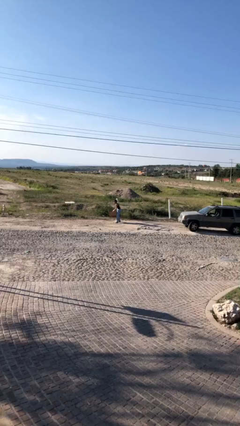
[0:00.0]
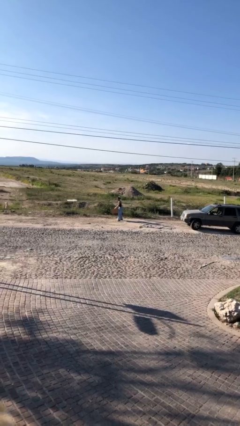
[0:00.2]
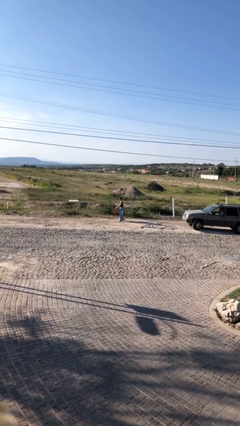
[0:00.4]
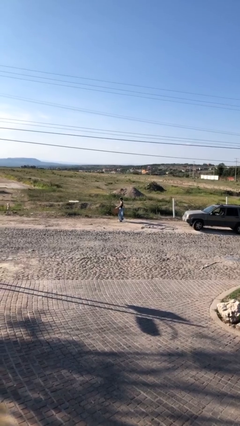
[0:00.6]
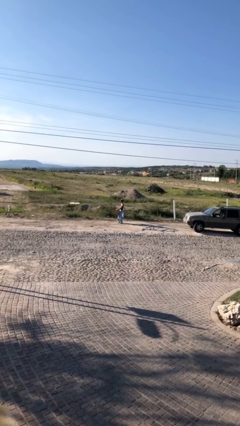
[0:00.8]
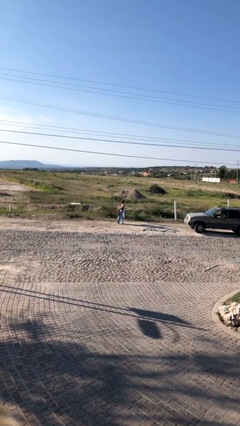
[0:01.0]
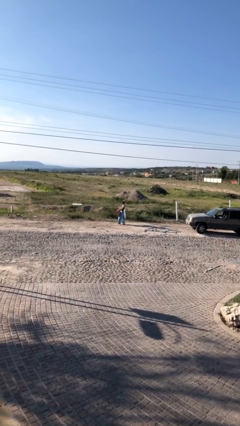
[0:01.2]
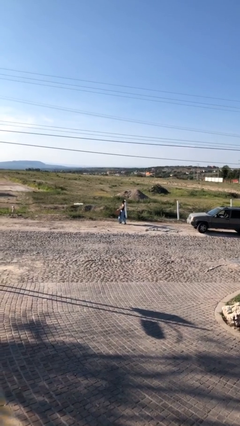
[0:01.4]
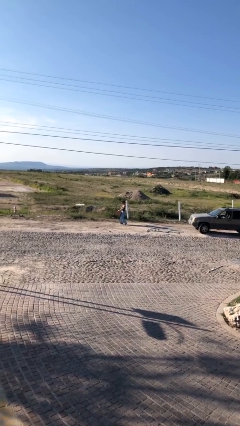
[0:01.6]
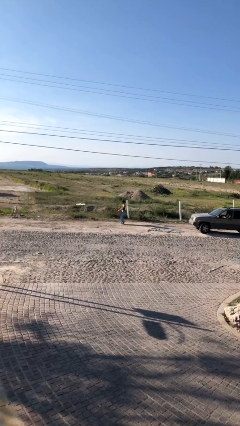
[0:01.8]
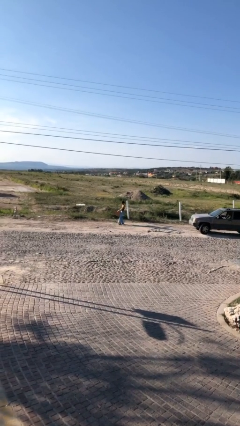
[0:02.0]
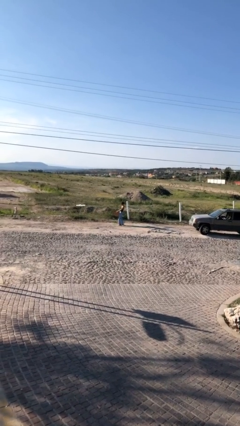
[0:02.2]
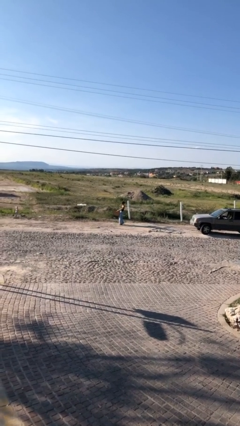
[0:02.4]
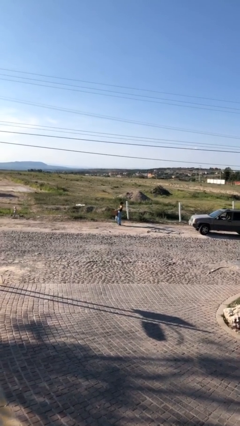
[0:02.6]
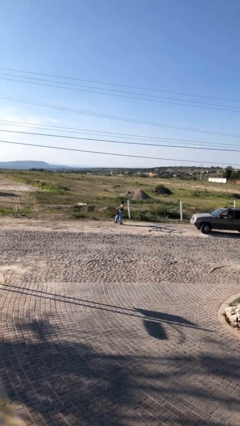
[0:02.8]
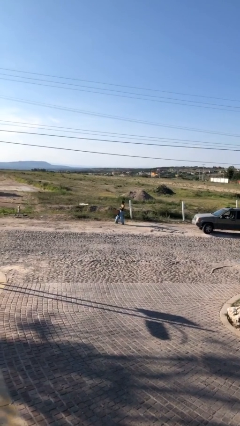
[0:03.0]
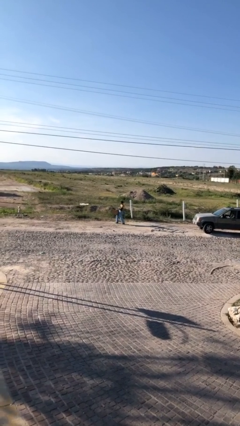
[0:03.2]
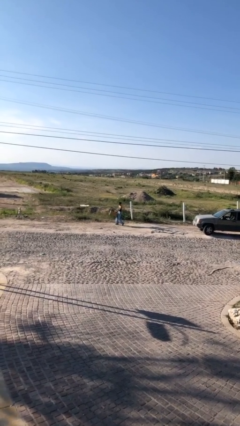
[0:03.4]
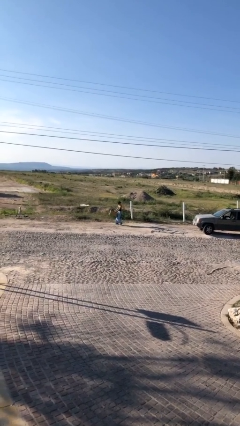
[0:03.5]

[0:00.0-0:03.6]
person carries heavy object

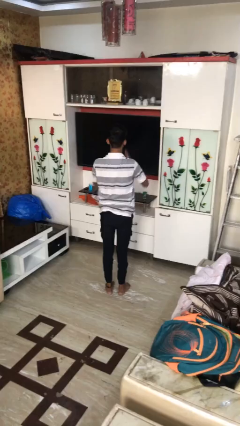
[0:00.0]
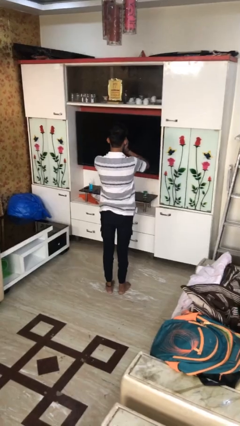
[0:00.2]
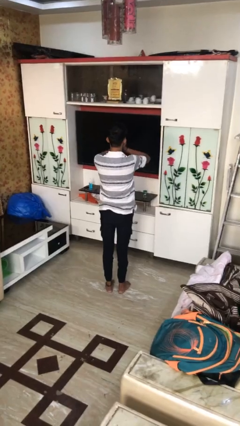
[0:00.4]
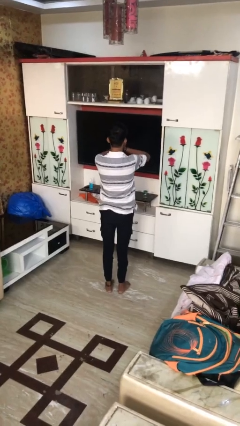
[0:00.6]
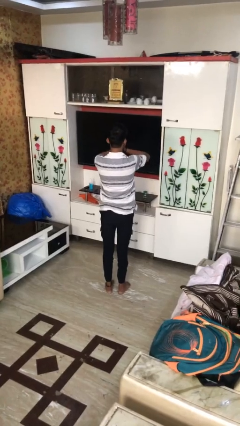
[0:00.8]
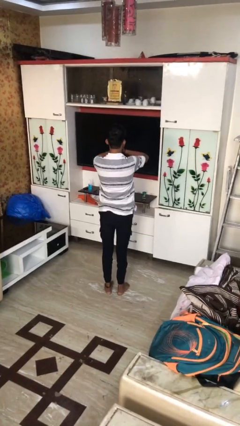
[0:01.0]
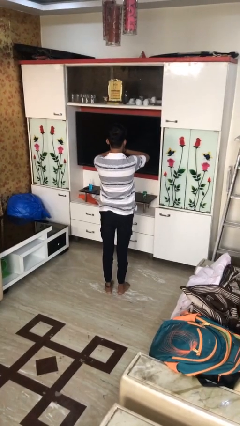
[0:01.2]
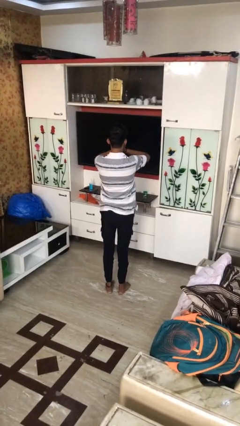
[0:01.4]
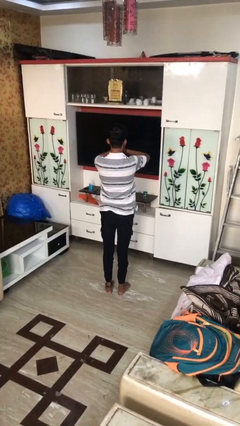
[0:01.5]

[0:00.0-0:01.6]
person covers face with hands

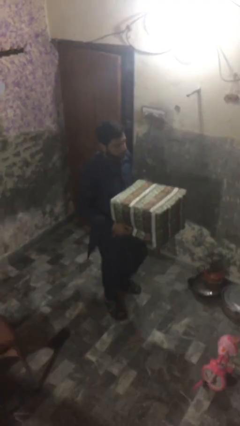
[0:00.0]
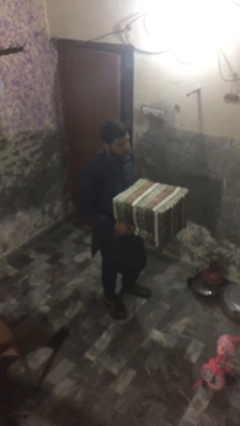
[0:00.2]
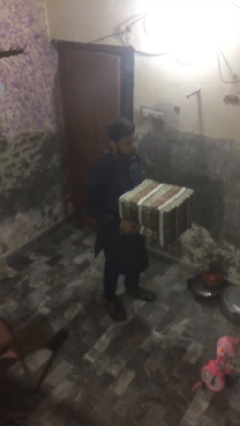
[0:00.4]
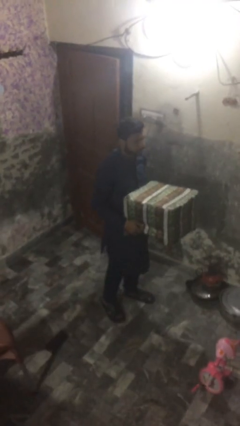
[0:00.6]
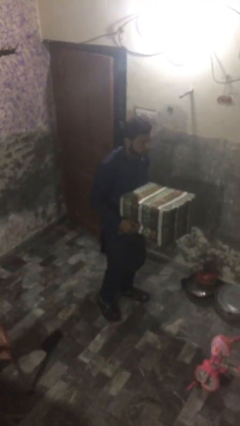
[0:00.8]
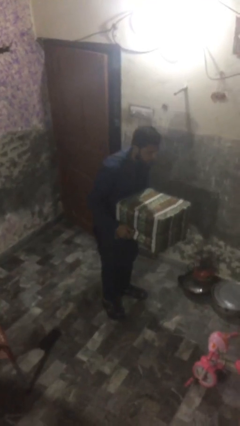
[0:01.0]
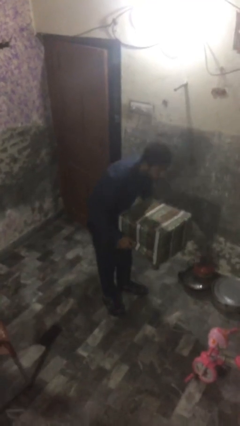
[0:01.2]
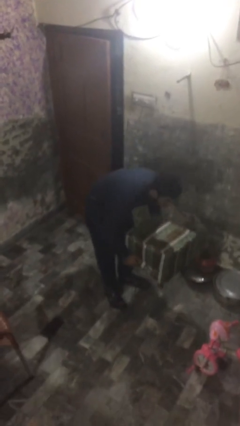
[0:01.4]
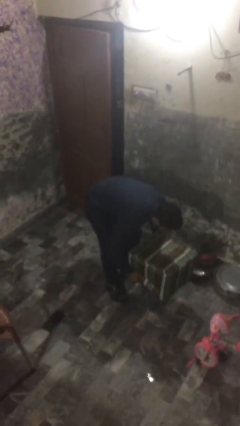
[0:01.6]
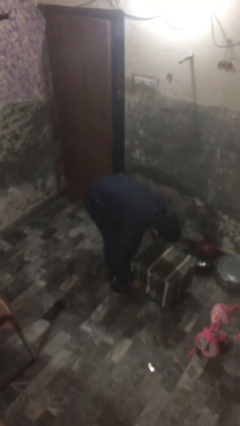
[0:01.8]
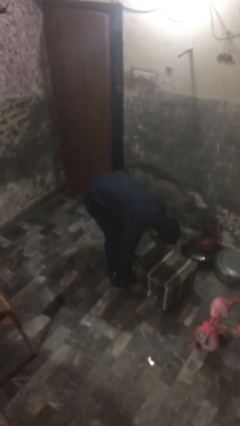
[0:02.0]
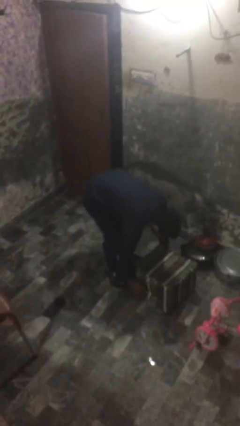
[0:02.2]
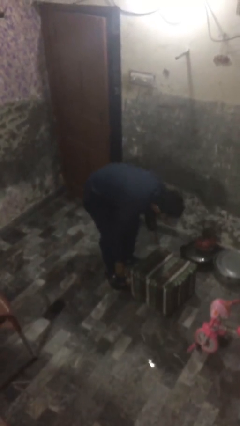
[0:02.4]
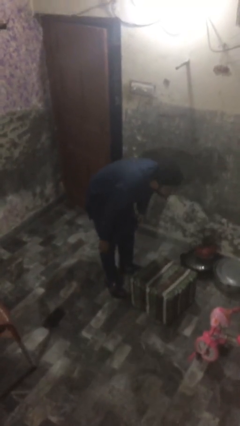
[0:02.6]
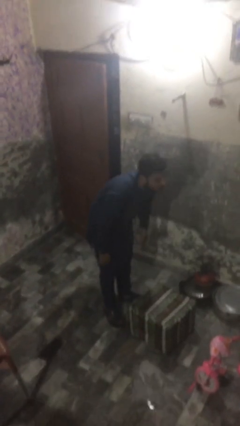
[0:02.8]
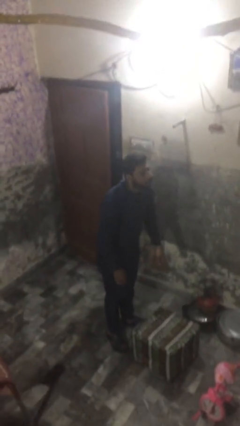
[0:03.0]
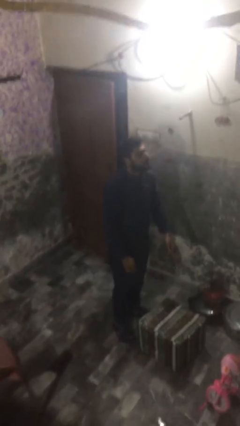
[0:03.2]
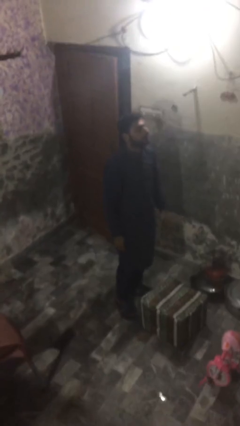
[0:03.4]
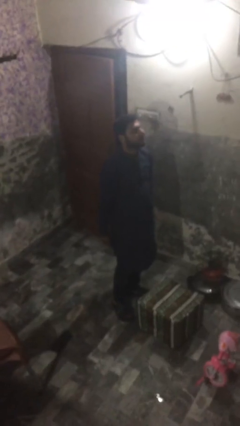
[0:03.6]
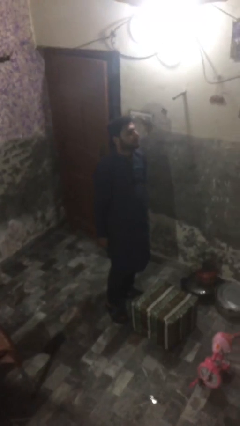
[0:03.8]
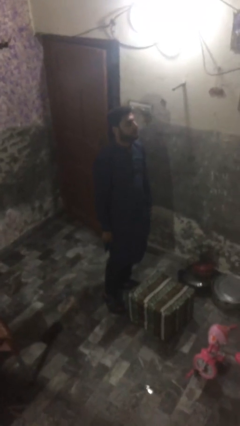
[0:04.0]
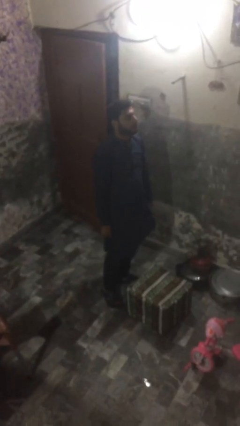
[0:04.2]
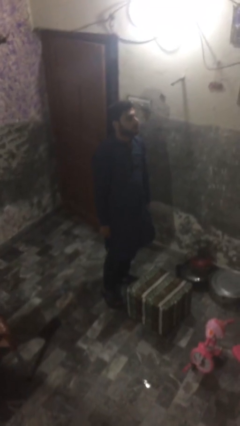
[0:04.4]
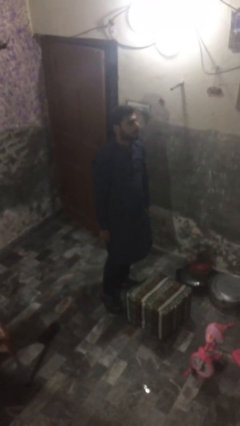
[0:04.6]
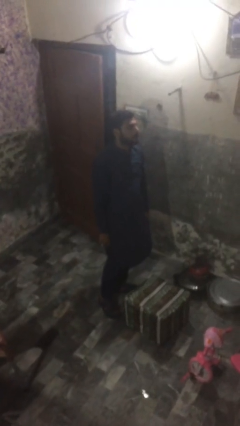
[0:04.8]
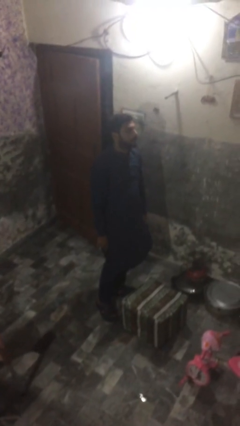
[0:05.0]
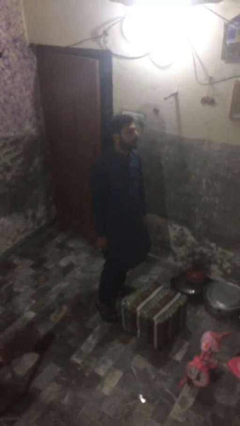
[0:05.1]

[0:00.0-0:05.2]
person puts down object on floor

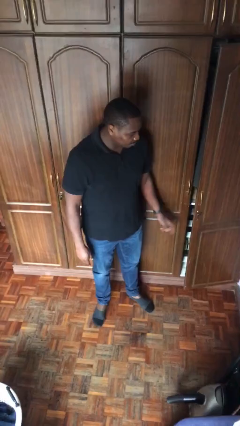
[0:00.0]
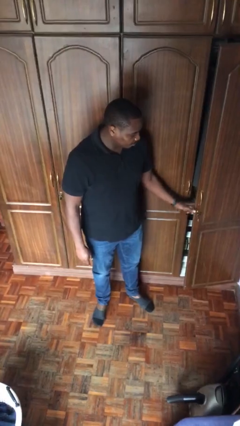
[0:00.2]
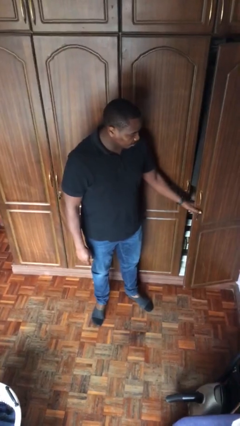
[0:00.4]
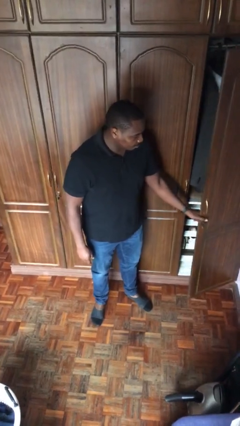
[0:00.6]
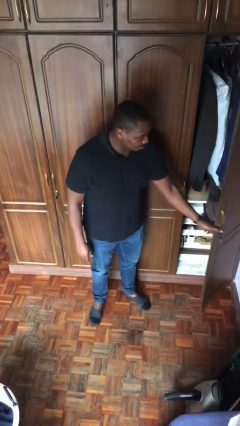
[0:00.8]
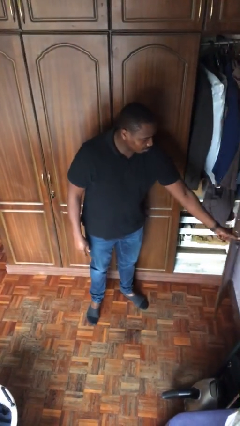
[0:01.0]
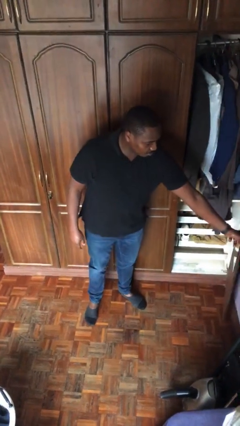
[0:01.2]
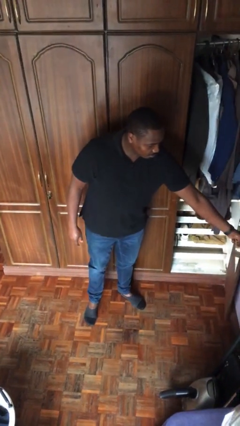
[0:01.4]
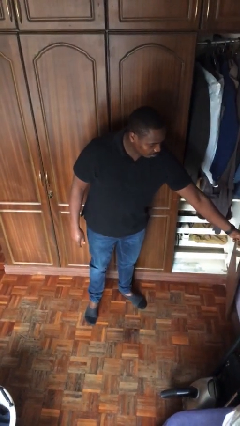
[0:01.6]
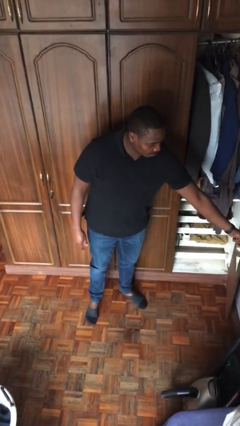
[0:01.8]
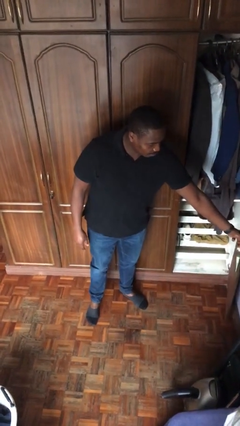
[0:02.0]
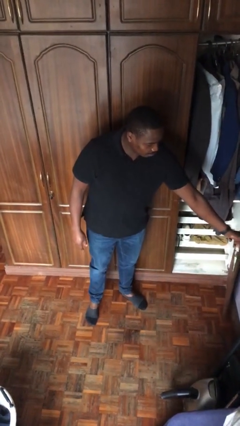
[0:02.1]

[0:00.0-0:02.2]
person opens closet door

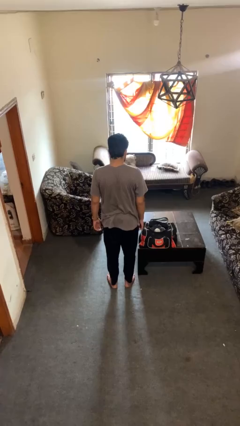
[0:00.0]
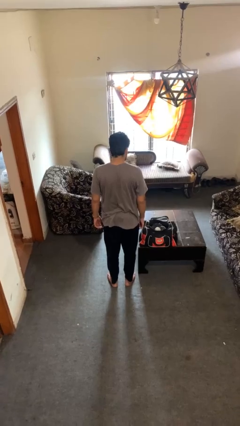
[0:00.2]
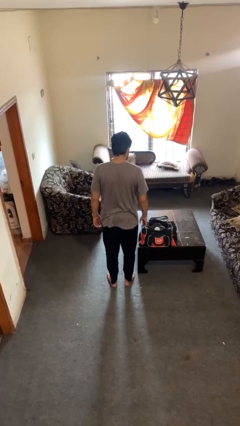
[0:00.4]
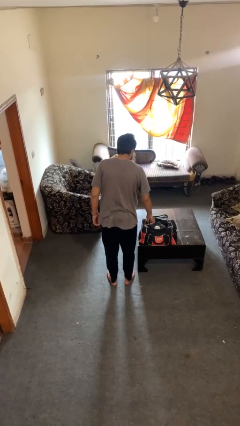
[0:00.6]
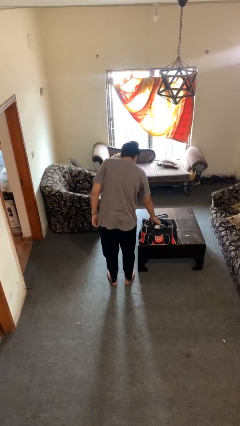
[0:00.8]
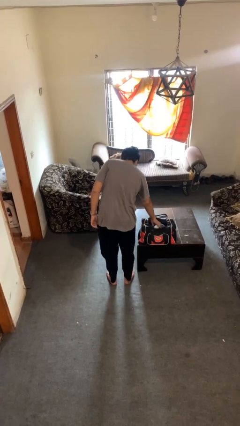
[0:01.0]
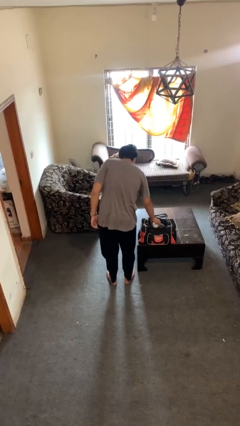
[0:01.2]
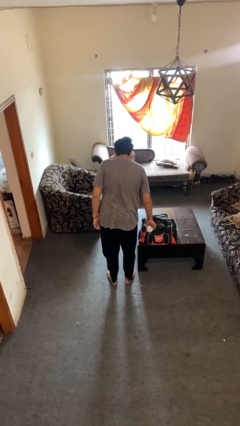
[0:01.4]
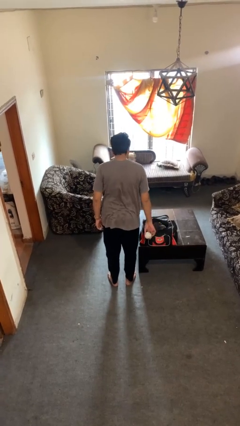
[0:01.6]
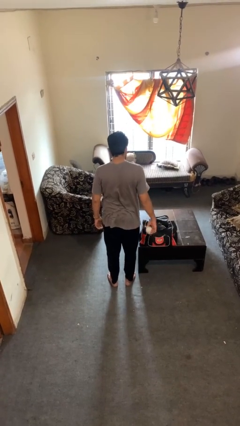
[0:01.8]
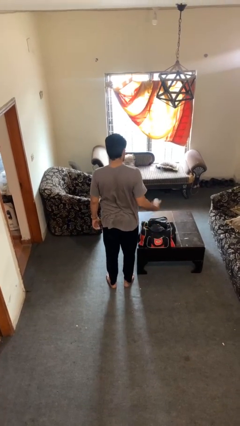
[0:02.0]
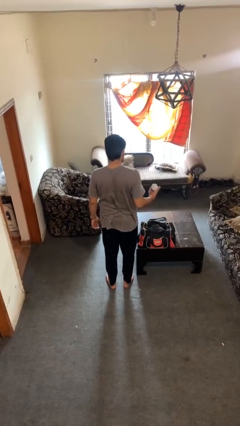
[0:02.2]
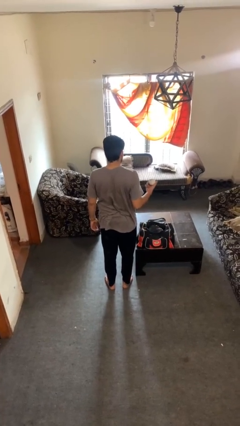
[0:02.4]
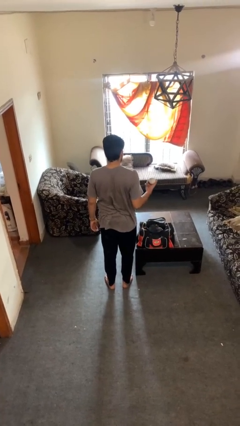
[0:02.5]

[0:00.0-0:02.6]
person takes object from bag

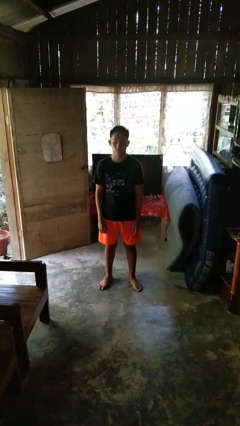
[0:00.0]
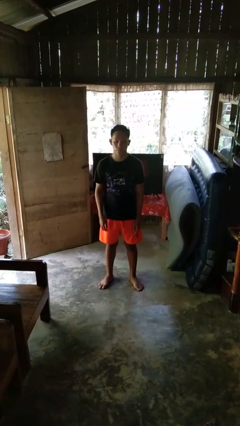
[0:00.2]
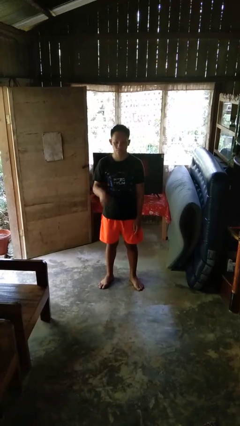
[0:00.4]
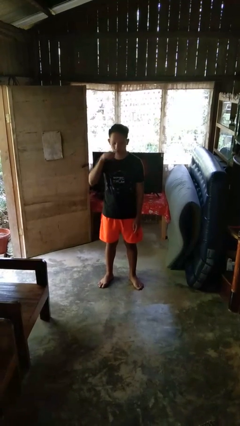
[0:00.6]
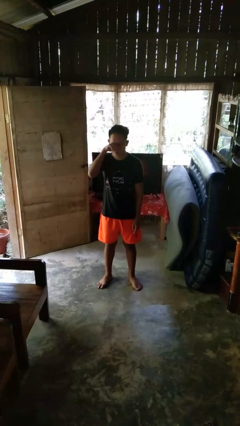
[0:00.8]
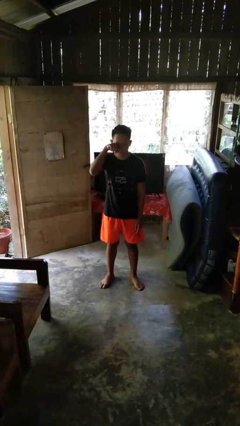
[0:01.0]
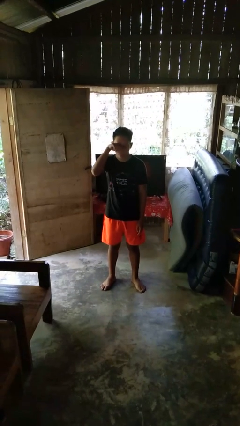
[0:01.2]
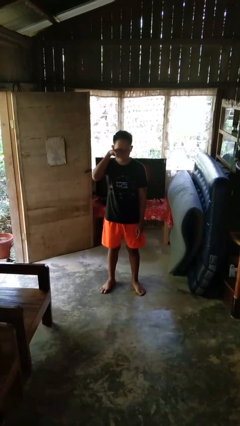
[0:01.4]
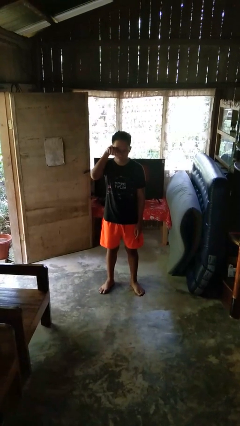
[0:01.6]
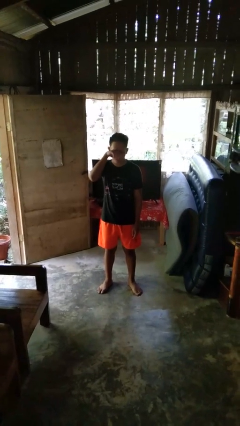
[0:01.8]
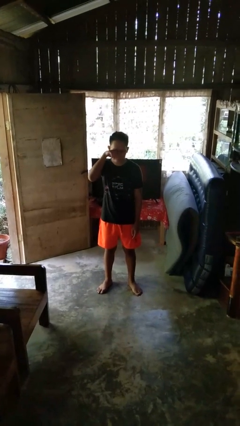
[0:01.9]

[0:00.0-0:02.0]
person rubs eyes
